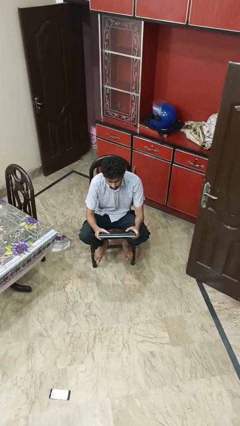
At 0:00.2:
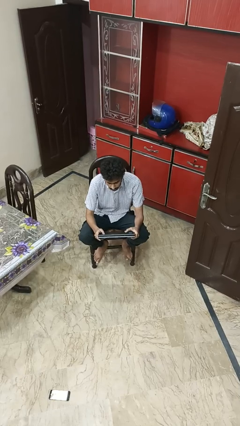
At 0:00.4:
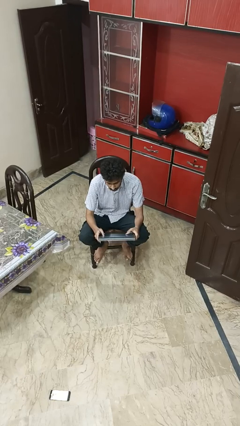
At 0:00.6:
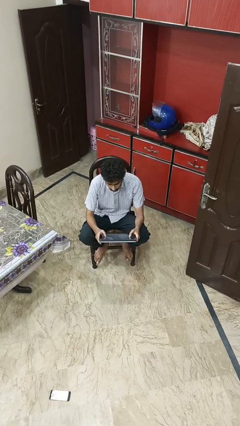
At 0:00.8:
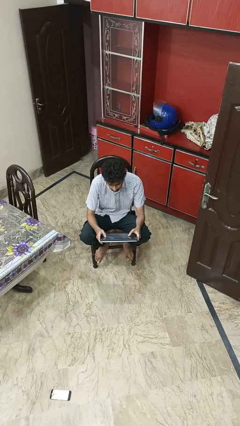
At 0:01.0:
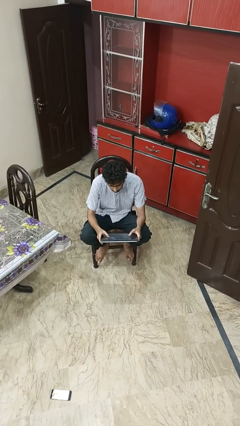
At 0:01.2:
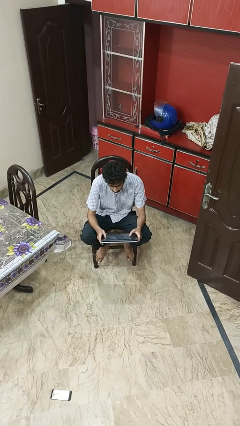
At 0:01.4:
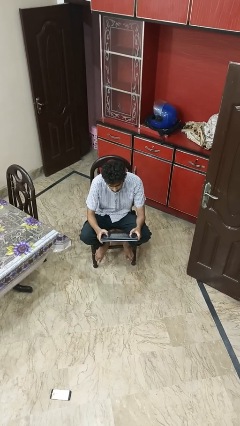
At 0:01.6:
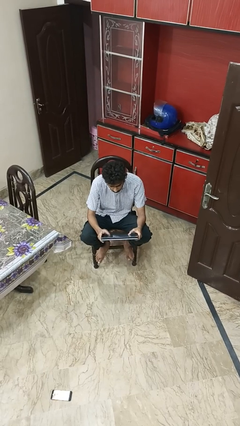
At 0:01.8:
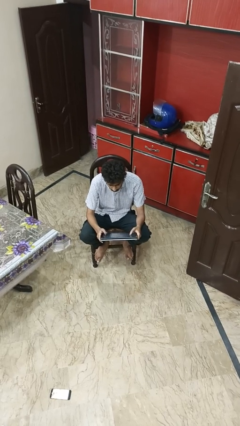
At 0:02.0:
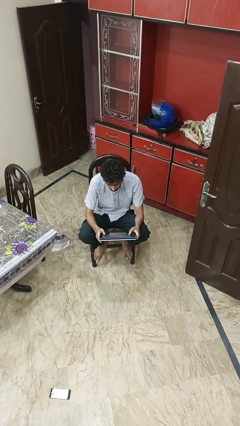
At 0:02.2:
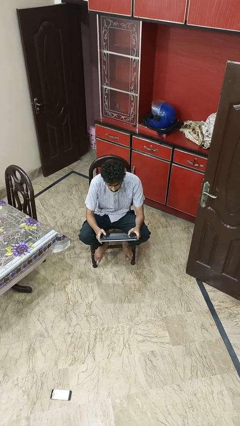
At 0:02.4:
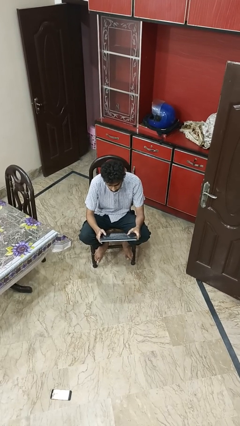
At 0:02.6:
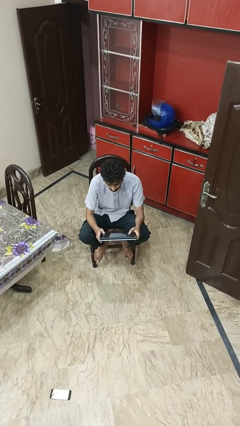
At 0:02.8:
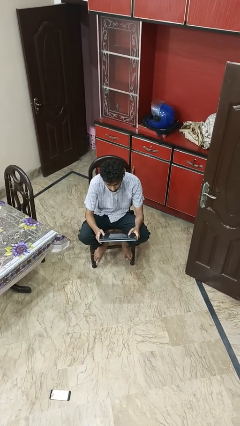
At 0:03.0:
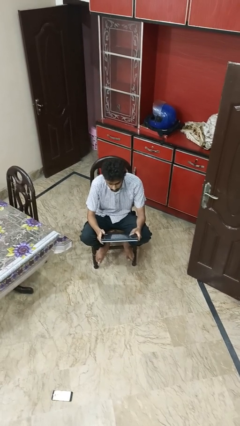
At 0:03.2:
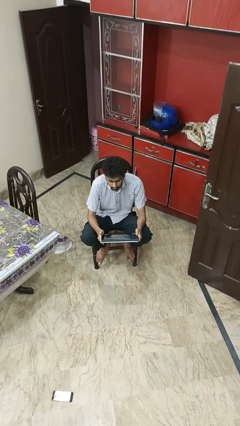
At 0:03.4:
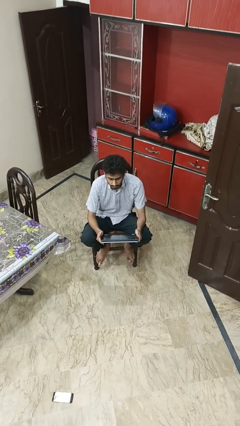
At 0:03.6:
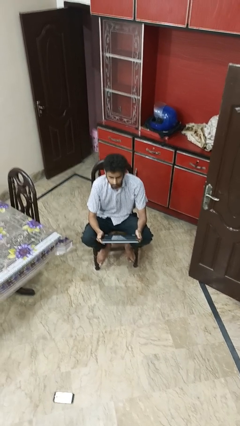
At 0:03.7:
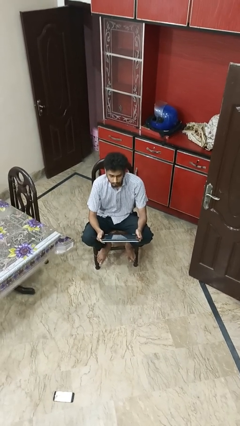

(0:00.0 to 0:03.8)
person interacts with tablet

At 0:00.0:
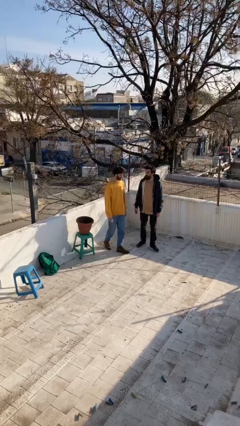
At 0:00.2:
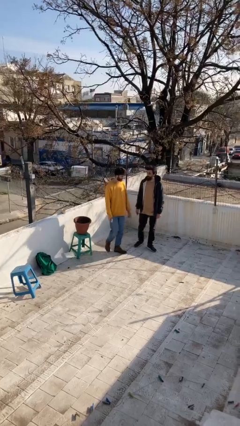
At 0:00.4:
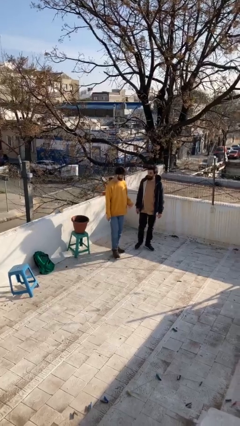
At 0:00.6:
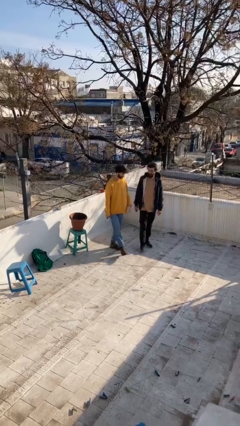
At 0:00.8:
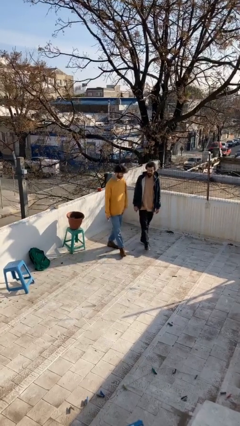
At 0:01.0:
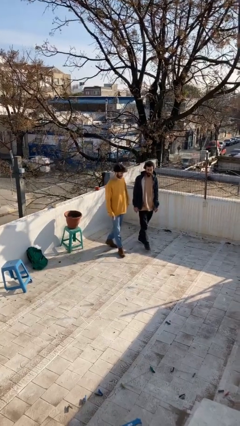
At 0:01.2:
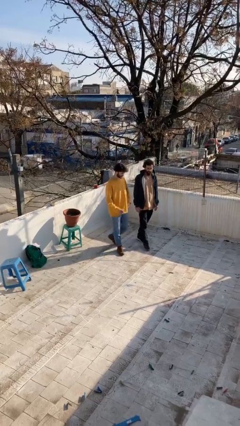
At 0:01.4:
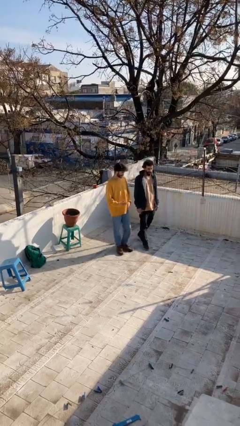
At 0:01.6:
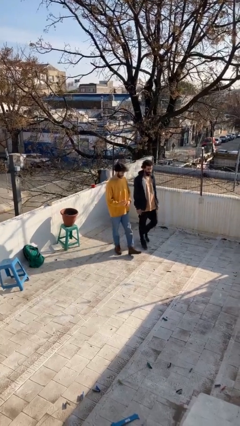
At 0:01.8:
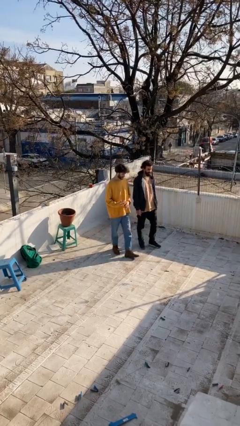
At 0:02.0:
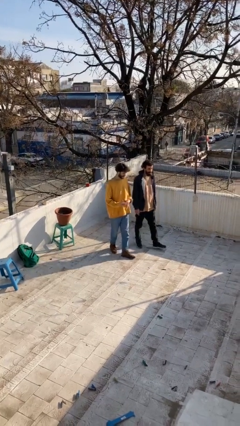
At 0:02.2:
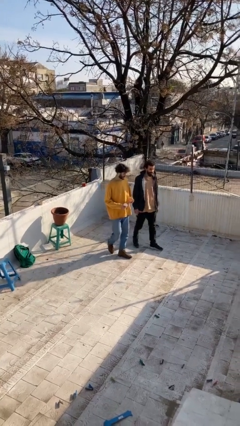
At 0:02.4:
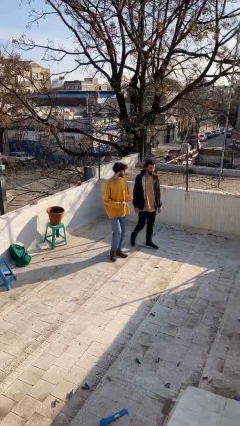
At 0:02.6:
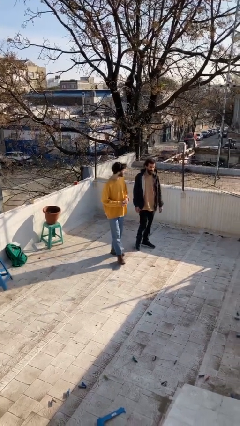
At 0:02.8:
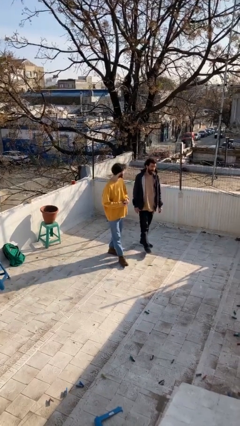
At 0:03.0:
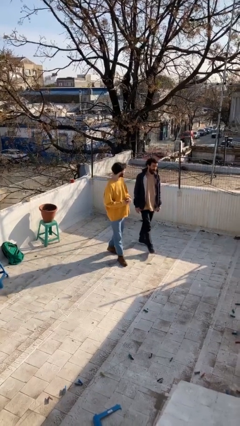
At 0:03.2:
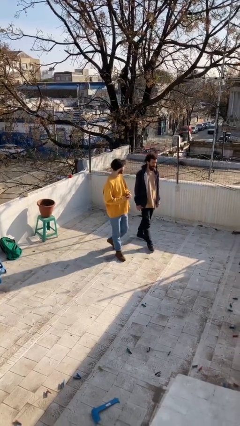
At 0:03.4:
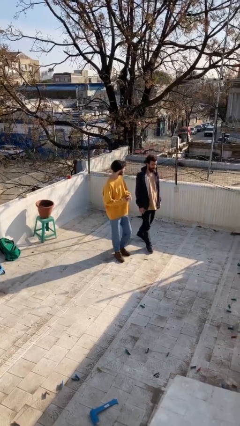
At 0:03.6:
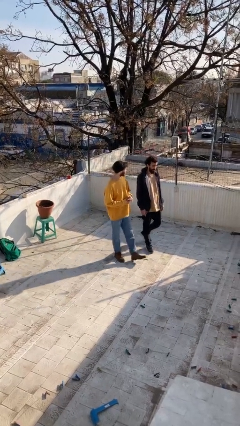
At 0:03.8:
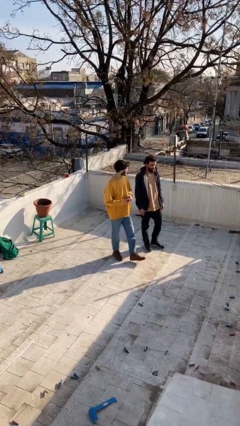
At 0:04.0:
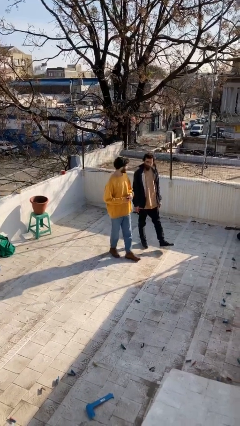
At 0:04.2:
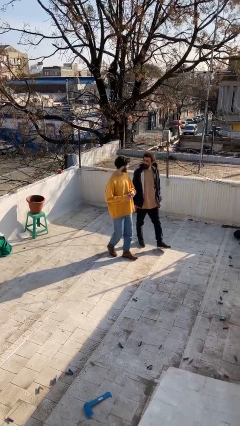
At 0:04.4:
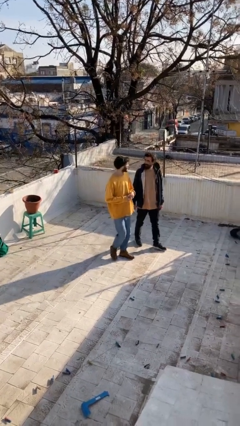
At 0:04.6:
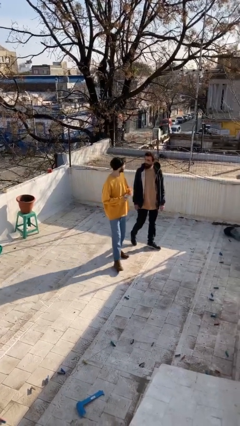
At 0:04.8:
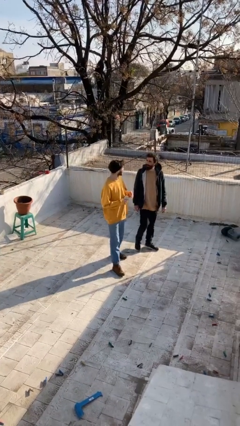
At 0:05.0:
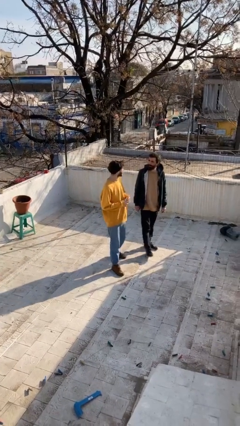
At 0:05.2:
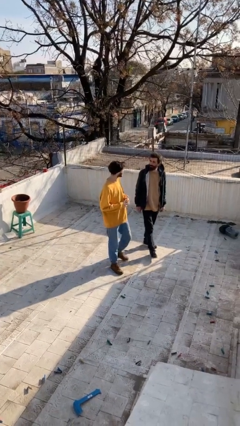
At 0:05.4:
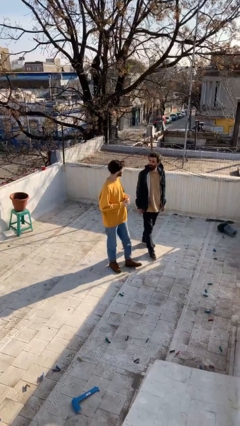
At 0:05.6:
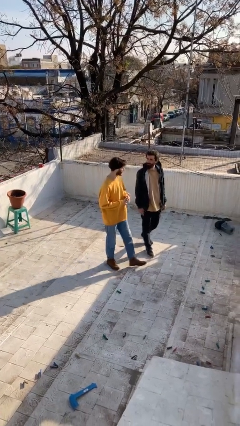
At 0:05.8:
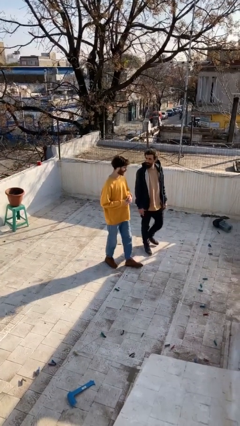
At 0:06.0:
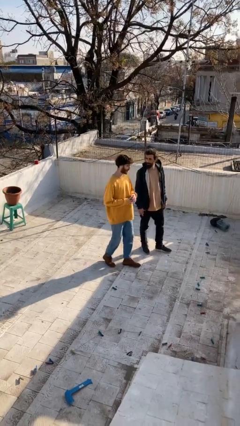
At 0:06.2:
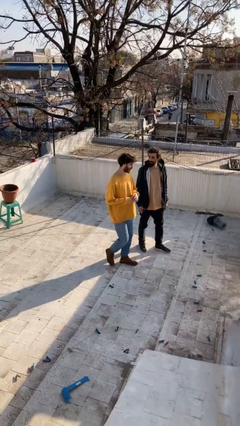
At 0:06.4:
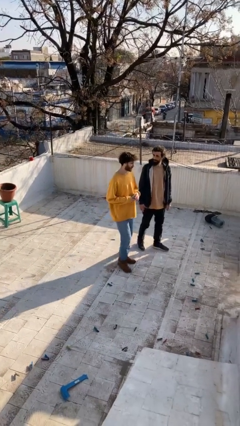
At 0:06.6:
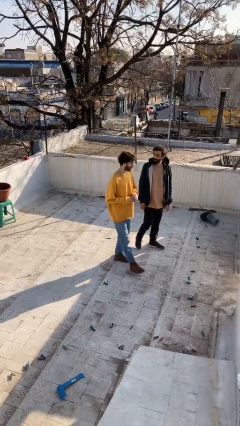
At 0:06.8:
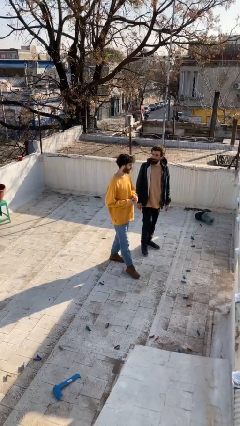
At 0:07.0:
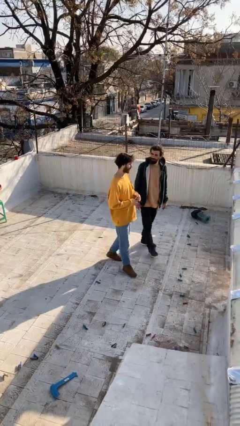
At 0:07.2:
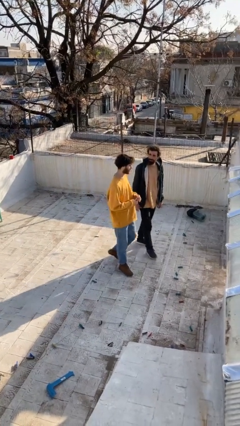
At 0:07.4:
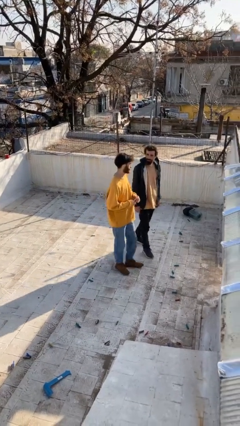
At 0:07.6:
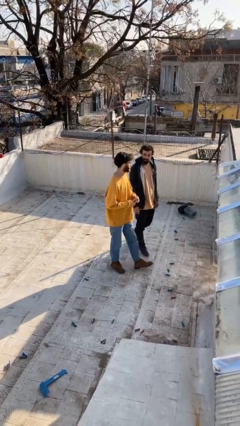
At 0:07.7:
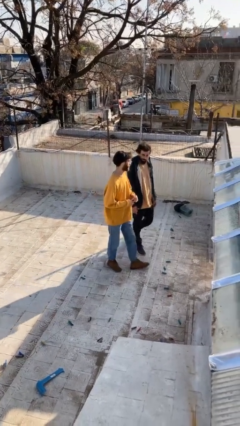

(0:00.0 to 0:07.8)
person talks to person

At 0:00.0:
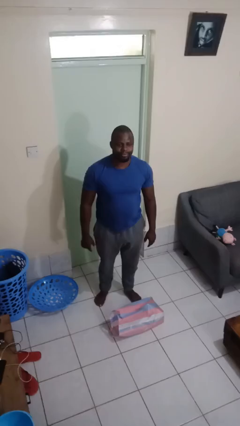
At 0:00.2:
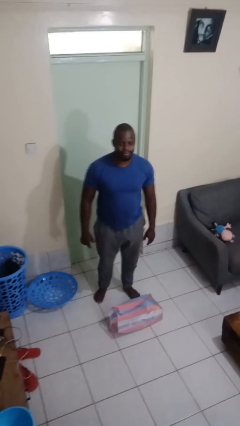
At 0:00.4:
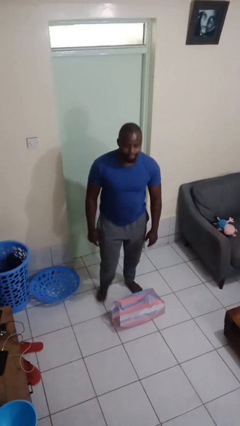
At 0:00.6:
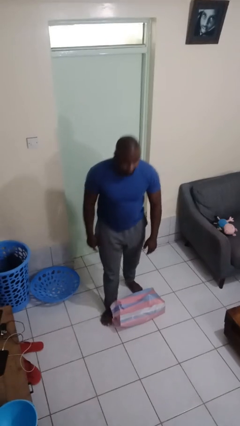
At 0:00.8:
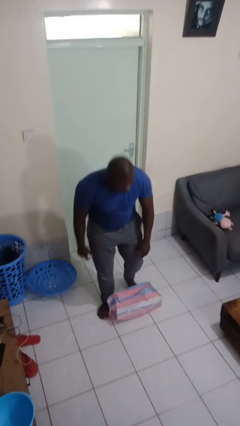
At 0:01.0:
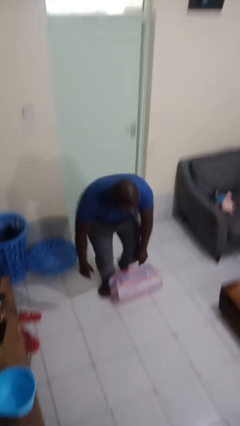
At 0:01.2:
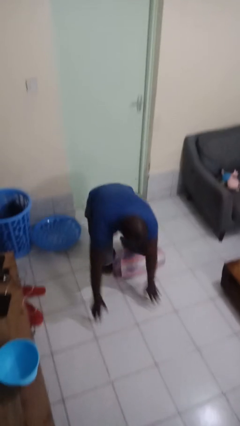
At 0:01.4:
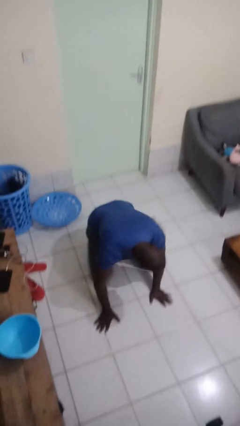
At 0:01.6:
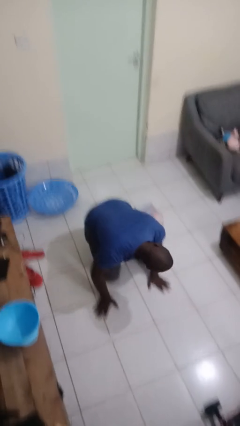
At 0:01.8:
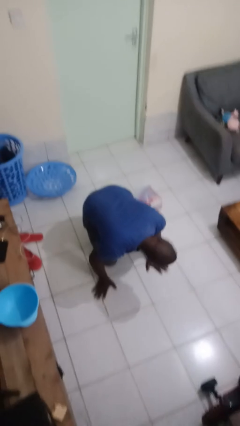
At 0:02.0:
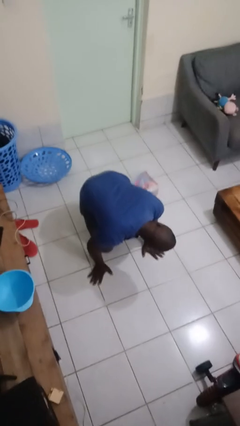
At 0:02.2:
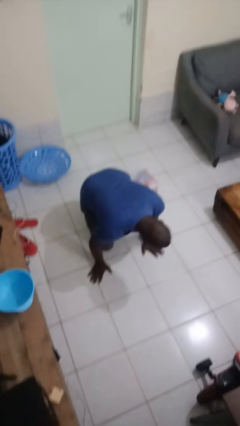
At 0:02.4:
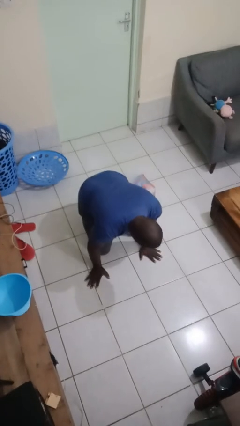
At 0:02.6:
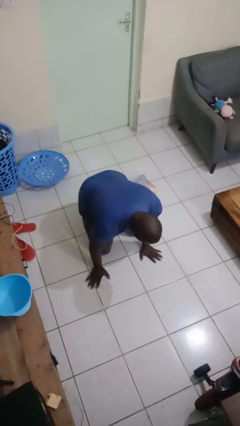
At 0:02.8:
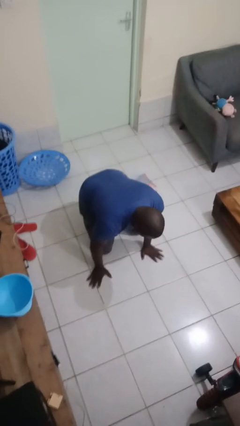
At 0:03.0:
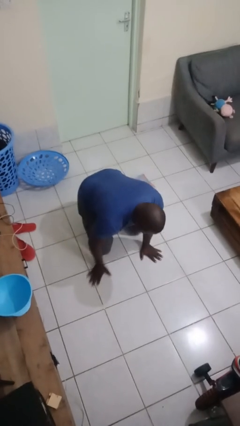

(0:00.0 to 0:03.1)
person trips on object on floor

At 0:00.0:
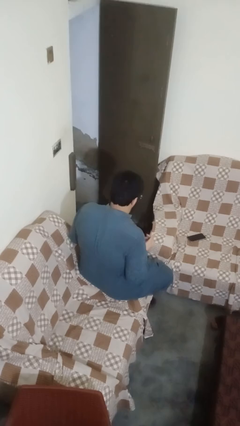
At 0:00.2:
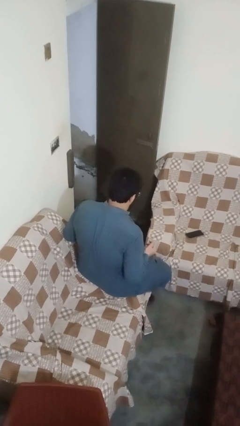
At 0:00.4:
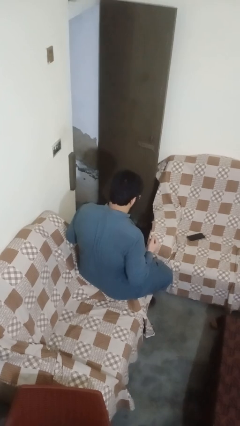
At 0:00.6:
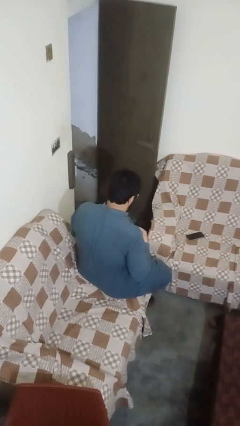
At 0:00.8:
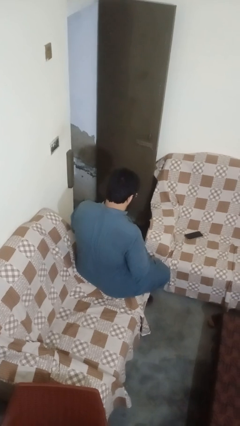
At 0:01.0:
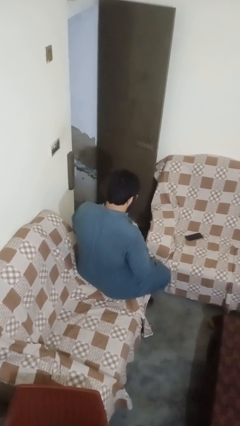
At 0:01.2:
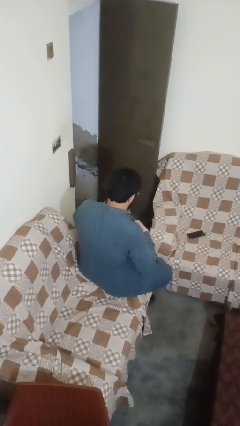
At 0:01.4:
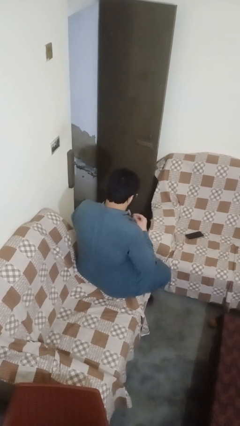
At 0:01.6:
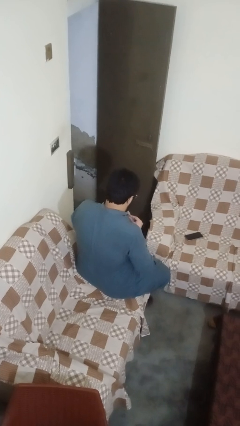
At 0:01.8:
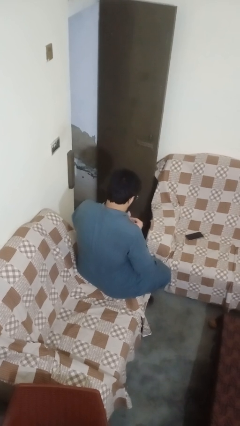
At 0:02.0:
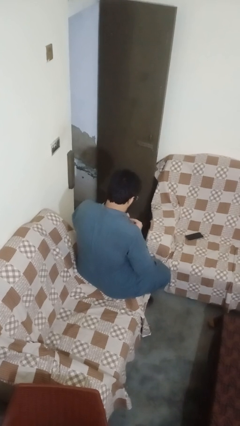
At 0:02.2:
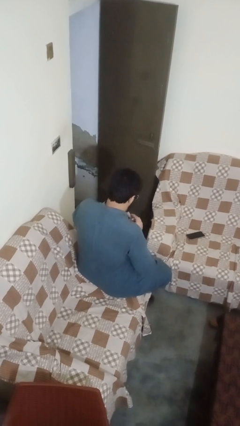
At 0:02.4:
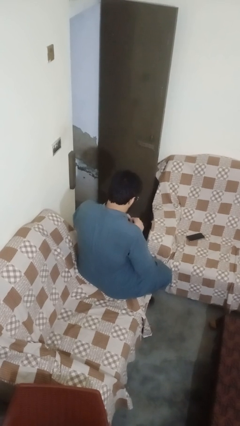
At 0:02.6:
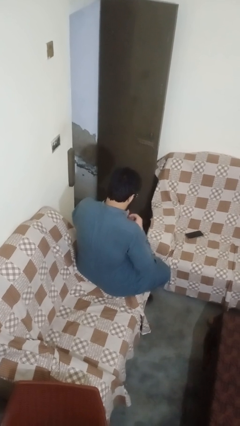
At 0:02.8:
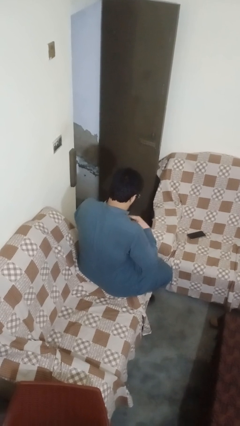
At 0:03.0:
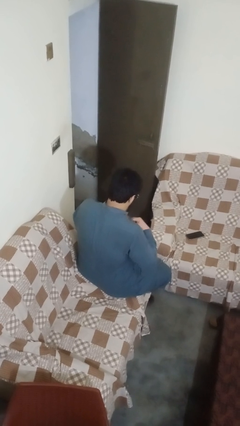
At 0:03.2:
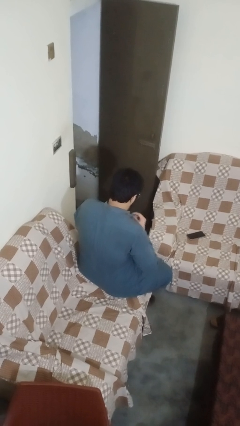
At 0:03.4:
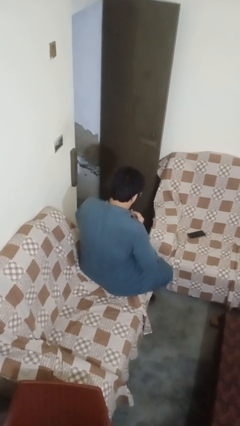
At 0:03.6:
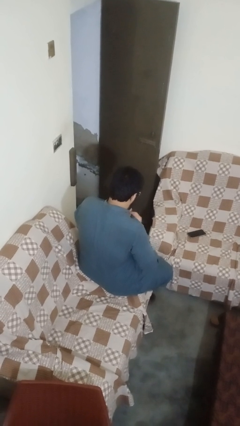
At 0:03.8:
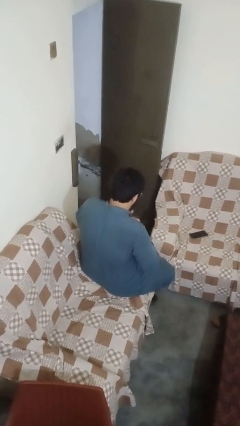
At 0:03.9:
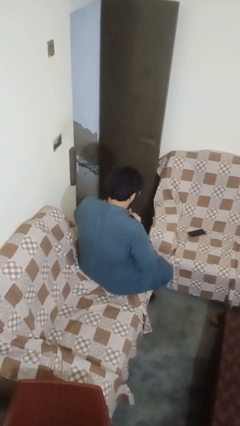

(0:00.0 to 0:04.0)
person buttons shirt
